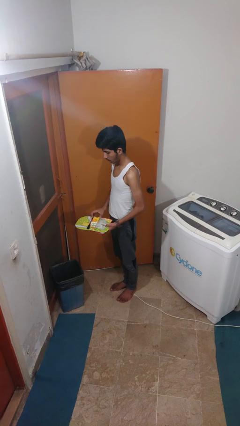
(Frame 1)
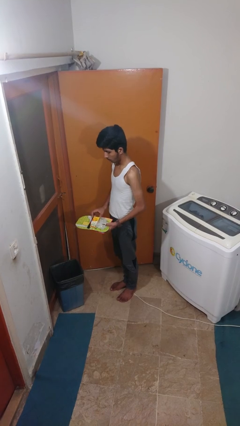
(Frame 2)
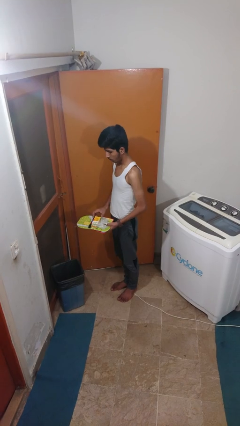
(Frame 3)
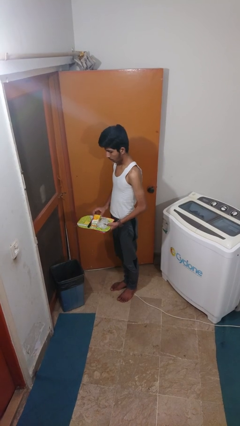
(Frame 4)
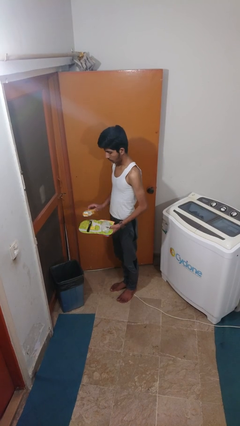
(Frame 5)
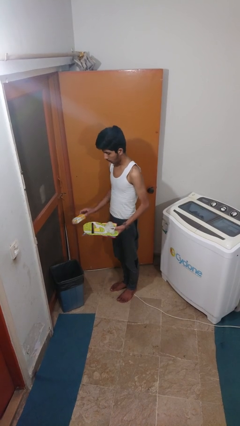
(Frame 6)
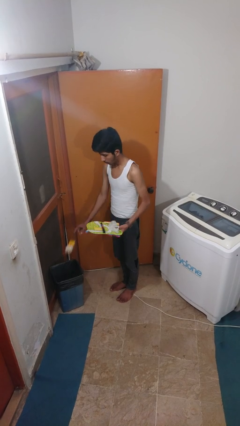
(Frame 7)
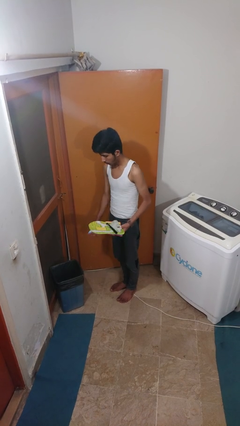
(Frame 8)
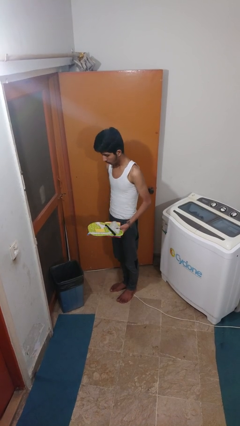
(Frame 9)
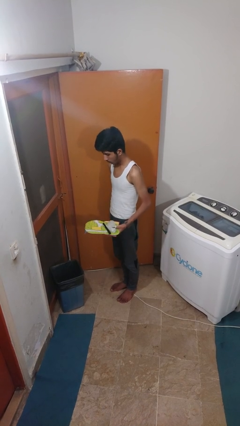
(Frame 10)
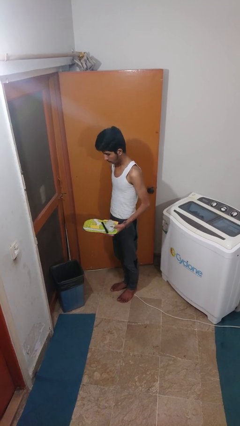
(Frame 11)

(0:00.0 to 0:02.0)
person discards trash

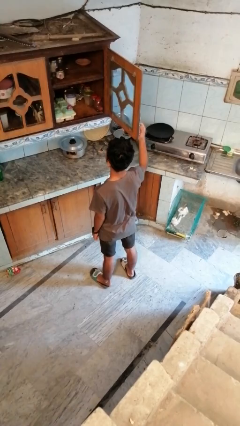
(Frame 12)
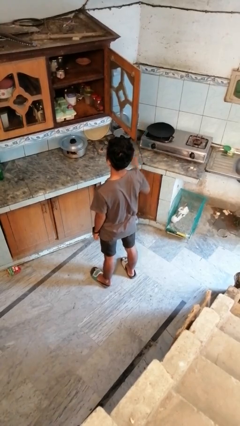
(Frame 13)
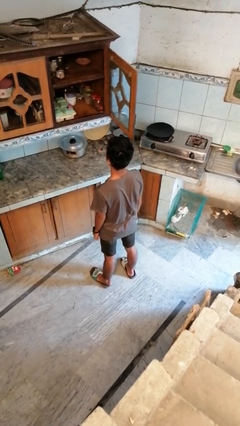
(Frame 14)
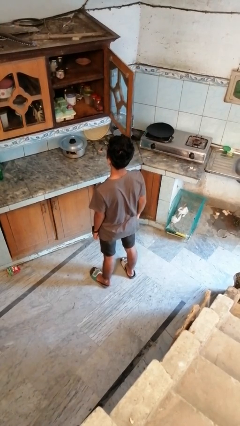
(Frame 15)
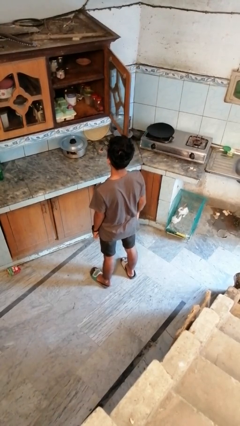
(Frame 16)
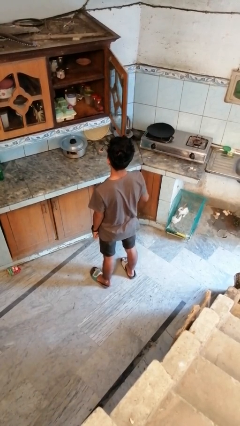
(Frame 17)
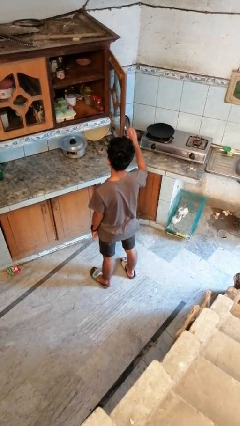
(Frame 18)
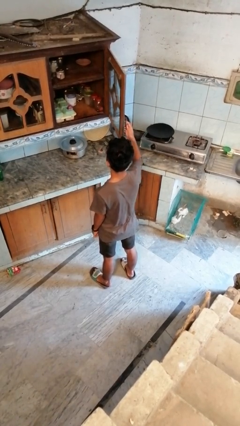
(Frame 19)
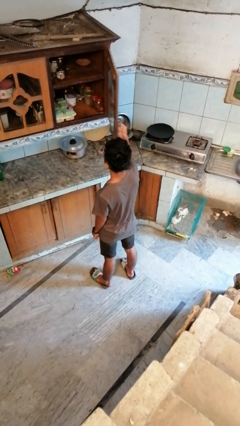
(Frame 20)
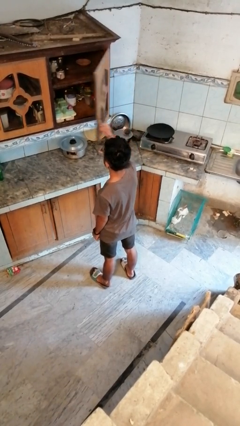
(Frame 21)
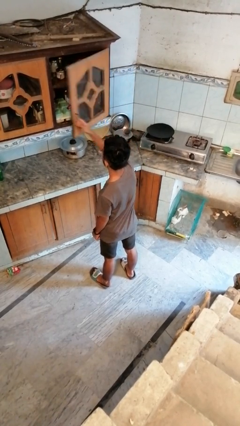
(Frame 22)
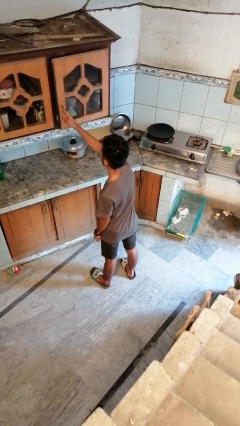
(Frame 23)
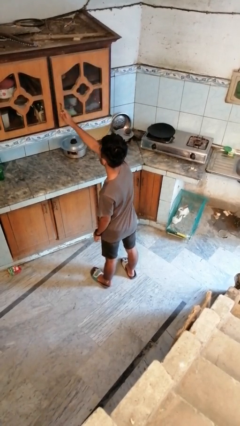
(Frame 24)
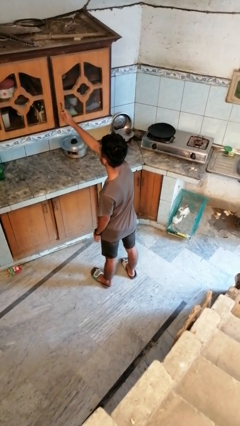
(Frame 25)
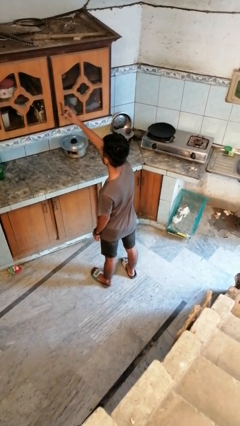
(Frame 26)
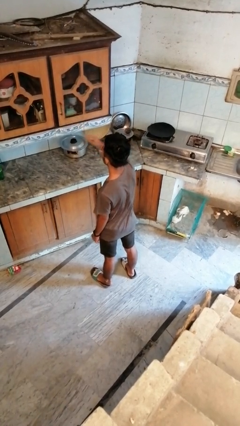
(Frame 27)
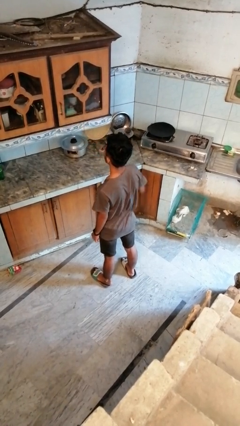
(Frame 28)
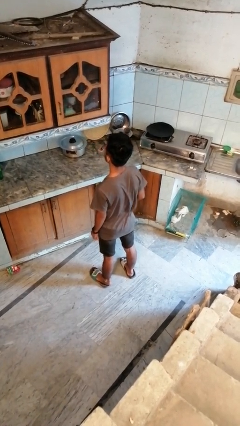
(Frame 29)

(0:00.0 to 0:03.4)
person closes cabinet

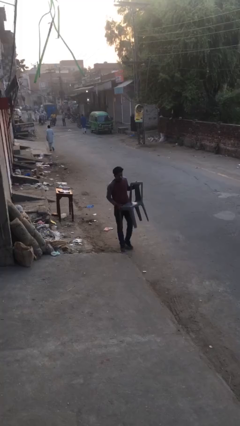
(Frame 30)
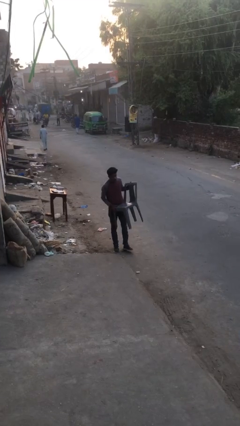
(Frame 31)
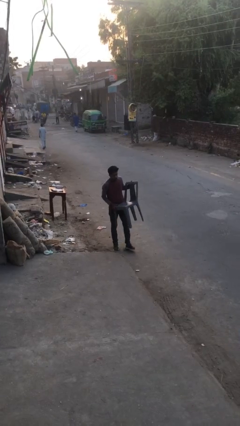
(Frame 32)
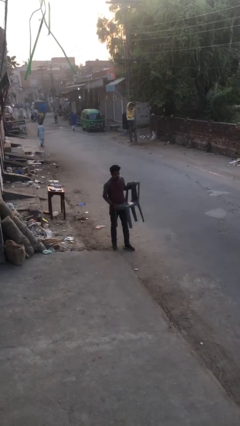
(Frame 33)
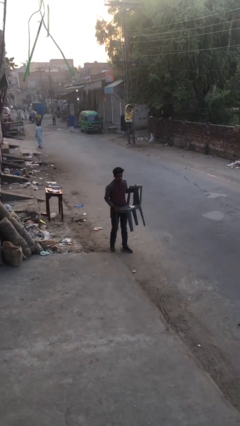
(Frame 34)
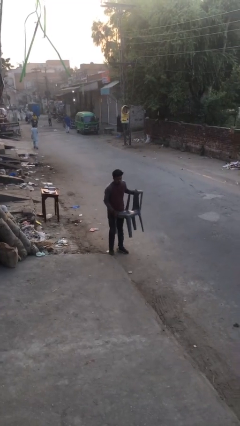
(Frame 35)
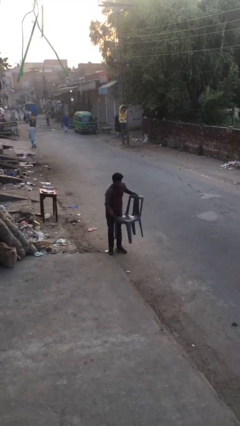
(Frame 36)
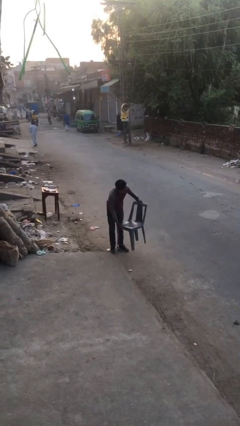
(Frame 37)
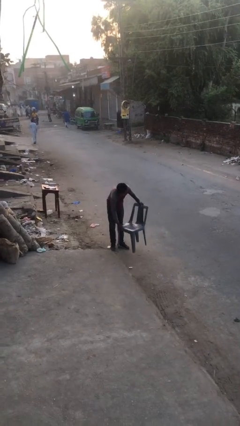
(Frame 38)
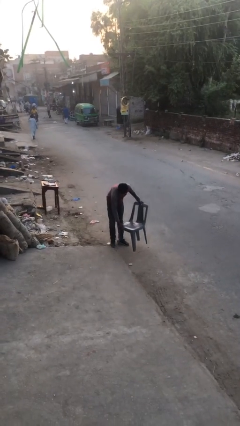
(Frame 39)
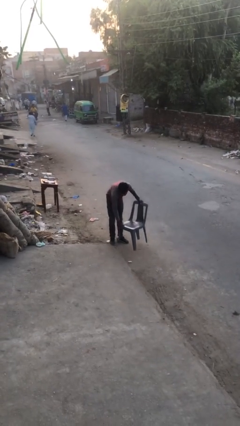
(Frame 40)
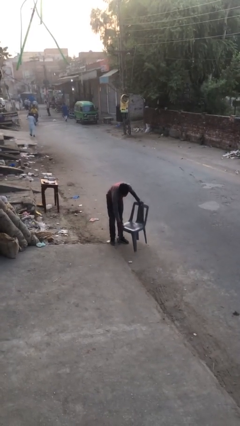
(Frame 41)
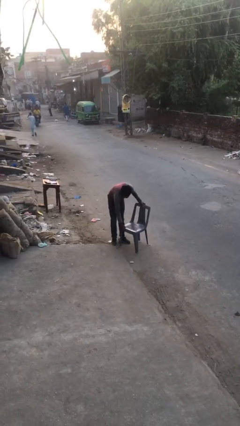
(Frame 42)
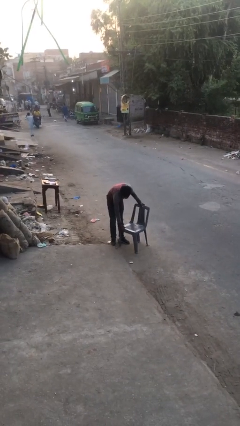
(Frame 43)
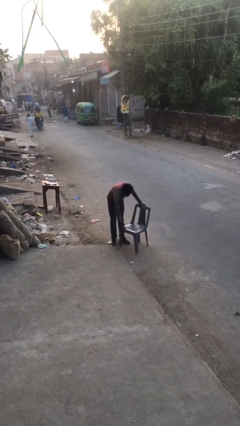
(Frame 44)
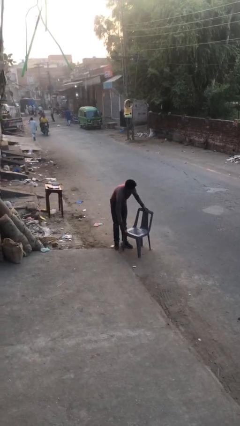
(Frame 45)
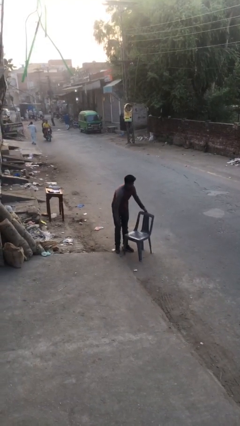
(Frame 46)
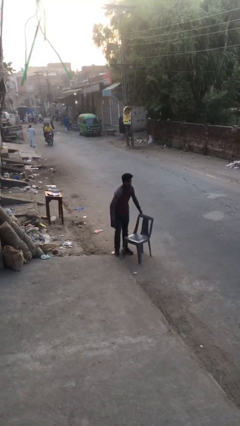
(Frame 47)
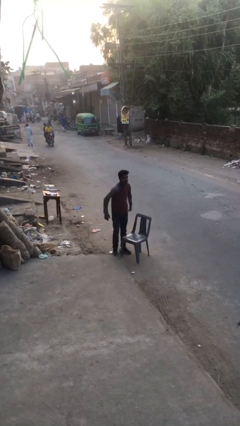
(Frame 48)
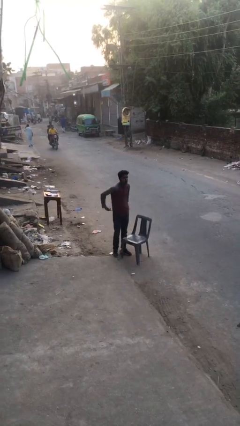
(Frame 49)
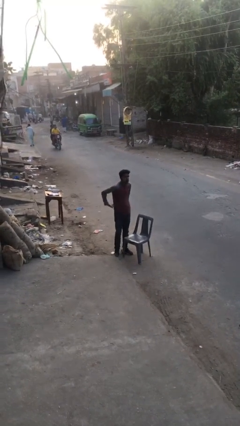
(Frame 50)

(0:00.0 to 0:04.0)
person puts down object on floor

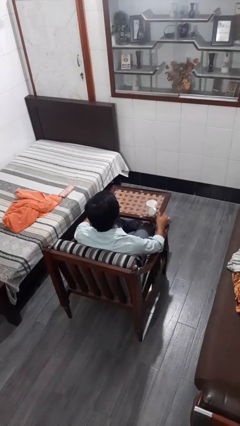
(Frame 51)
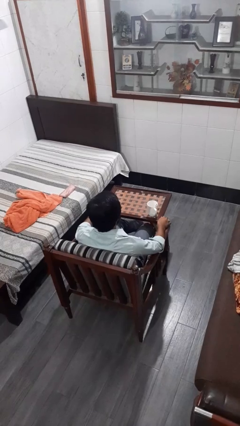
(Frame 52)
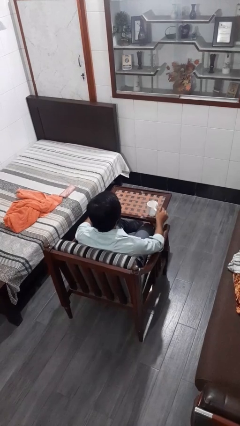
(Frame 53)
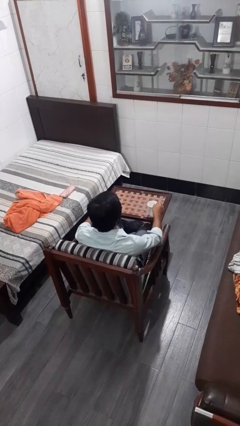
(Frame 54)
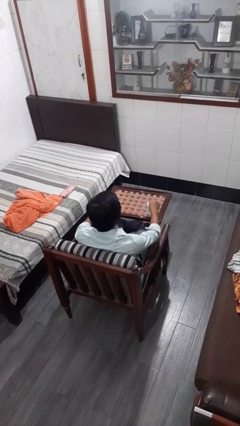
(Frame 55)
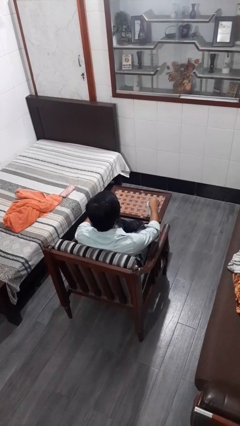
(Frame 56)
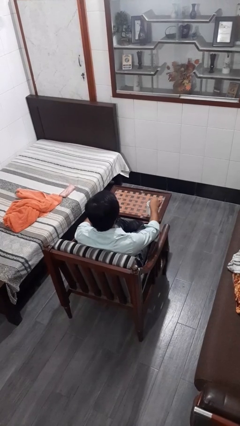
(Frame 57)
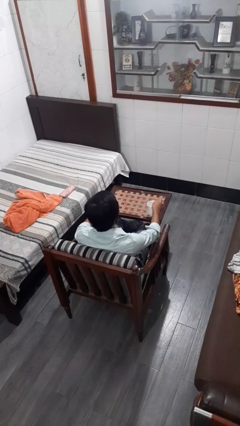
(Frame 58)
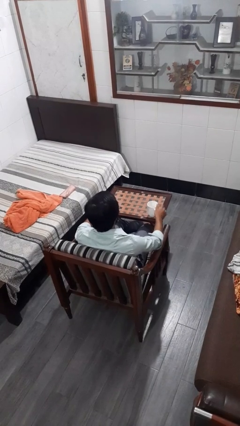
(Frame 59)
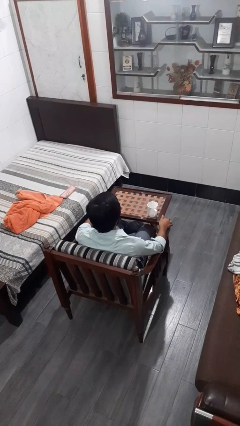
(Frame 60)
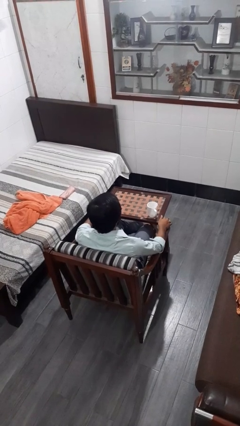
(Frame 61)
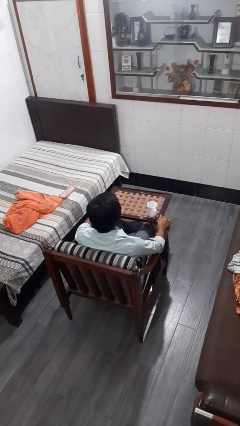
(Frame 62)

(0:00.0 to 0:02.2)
person stirs mug

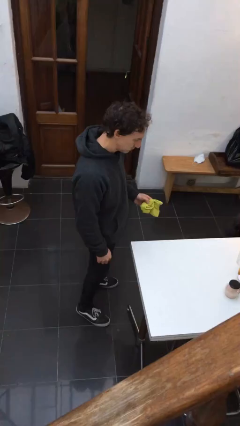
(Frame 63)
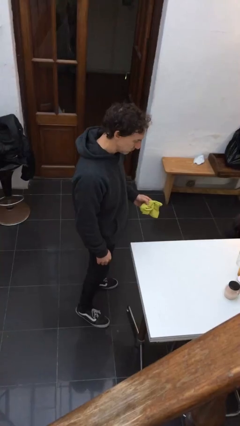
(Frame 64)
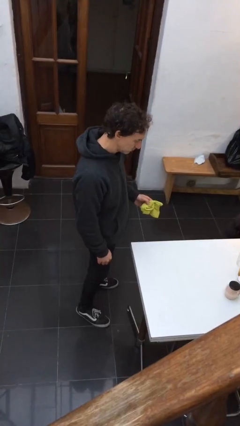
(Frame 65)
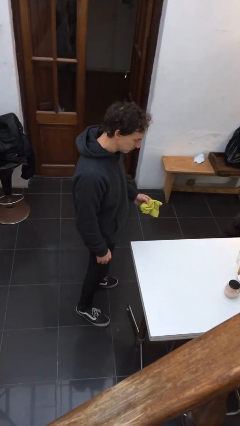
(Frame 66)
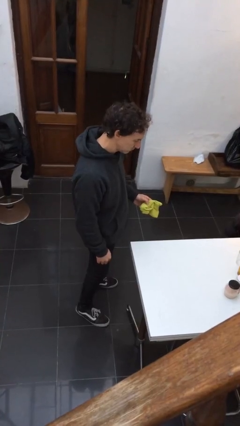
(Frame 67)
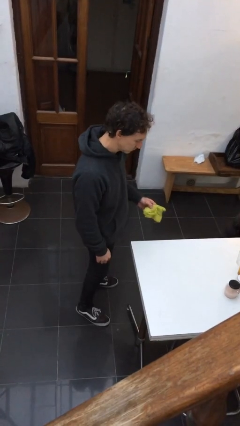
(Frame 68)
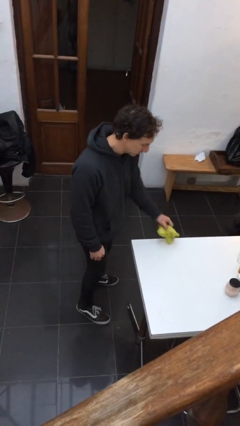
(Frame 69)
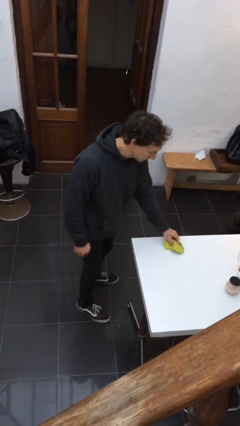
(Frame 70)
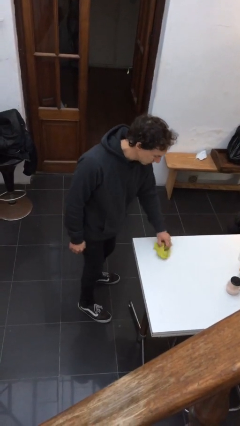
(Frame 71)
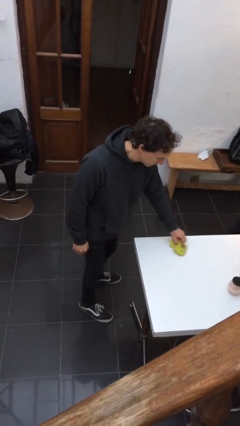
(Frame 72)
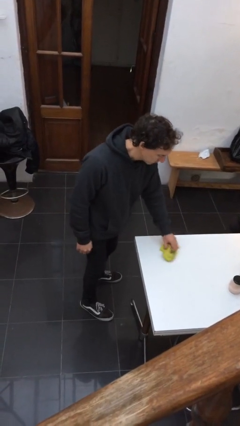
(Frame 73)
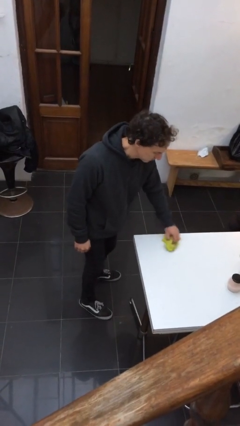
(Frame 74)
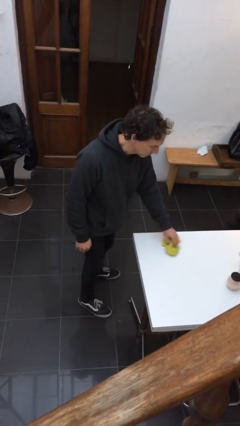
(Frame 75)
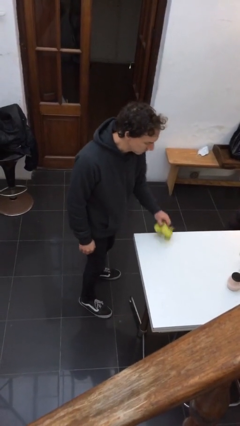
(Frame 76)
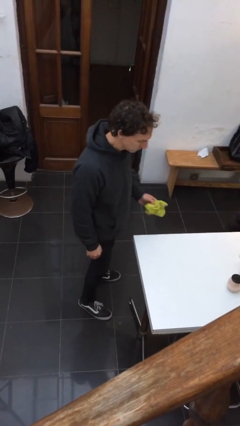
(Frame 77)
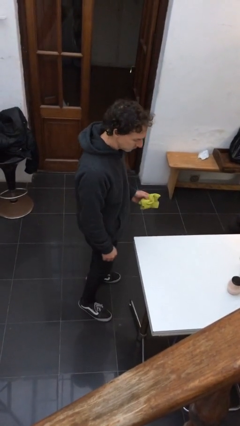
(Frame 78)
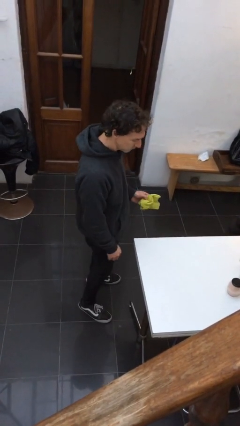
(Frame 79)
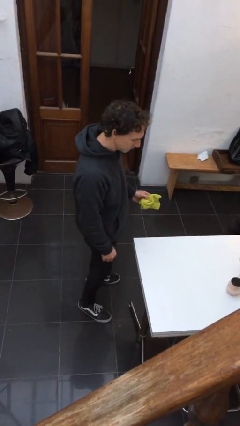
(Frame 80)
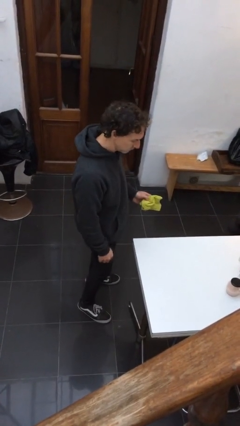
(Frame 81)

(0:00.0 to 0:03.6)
person cleans table with rag

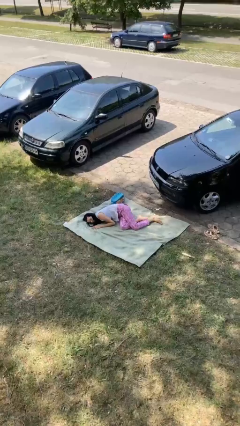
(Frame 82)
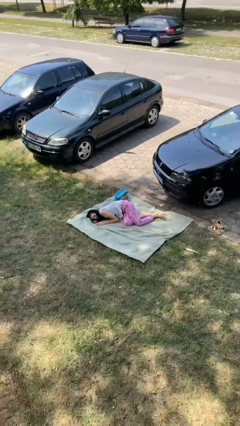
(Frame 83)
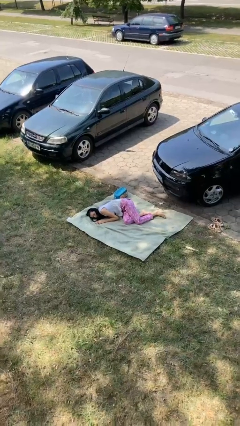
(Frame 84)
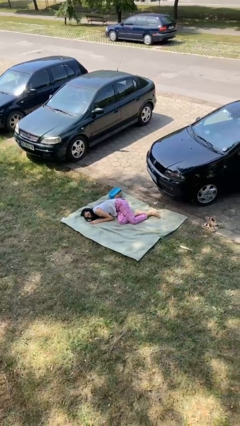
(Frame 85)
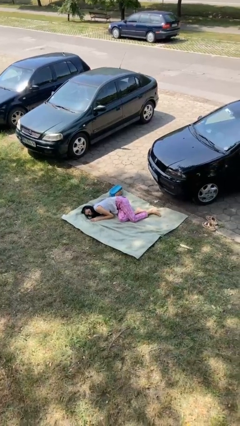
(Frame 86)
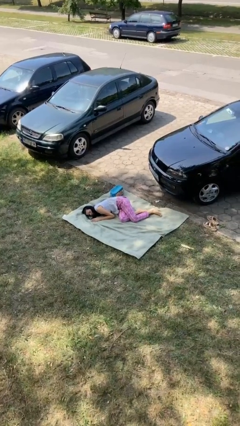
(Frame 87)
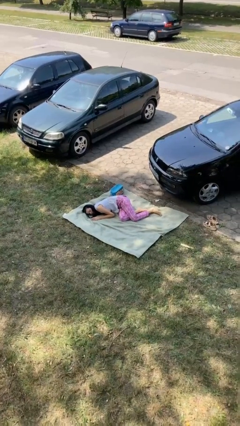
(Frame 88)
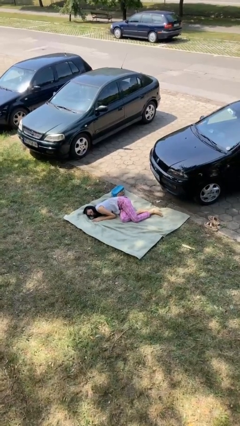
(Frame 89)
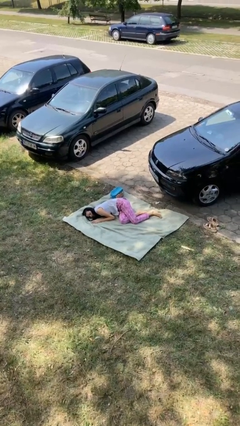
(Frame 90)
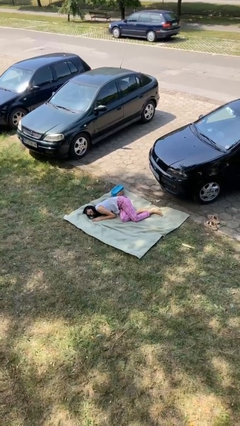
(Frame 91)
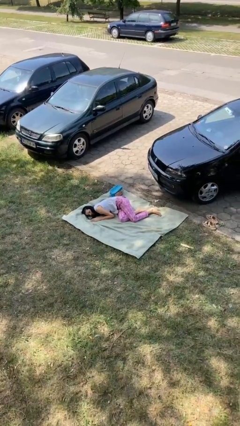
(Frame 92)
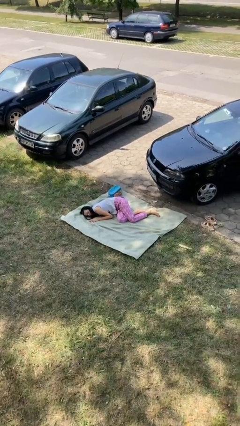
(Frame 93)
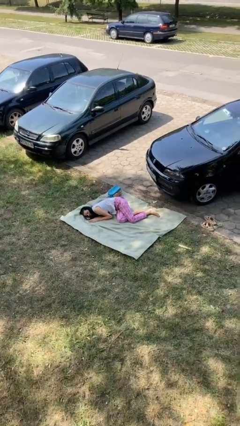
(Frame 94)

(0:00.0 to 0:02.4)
person lies down on floor
